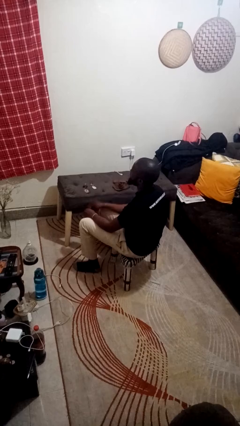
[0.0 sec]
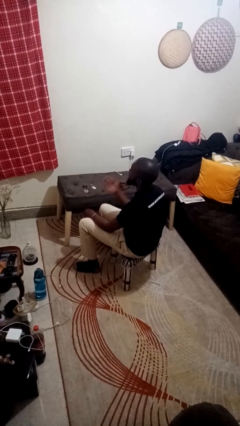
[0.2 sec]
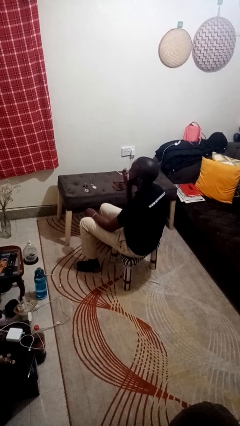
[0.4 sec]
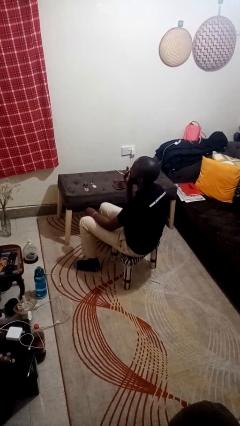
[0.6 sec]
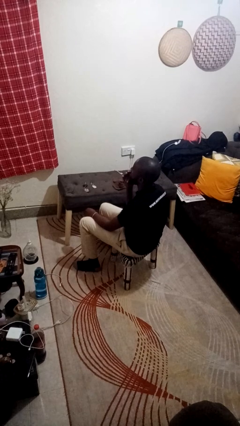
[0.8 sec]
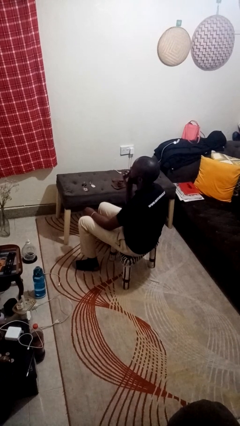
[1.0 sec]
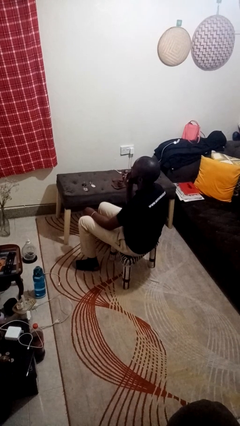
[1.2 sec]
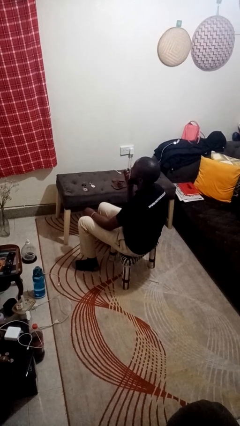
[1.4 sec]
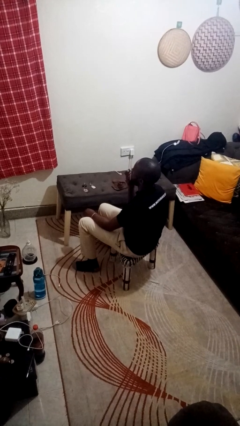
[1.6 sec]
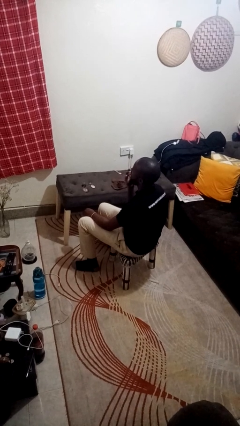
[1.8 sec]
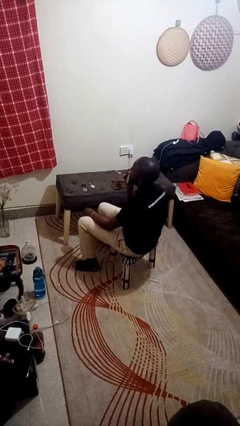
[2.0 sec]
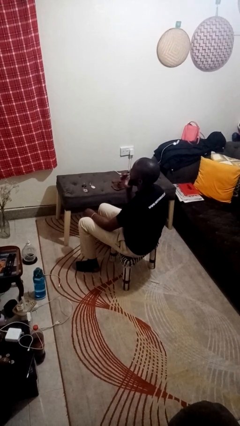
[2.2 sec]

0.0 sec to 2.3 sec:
person licks fingers

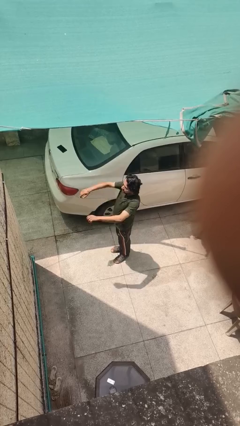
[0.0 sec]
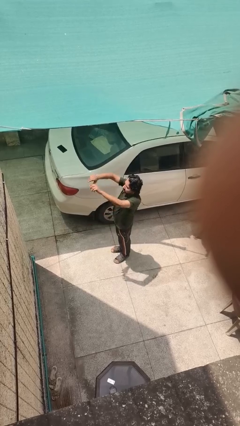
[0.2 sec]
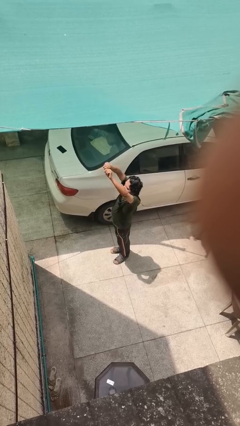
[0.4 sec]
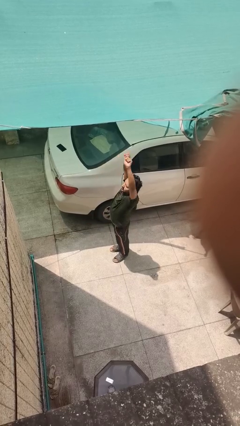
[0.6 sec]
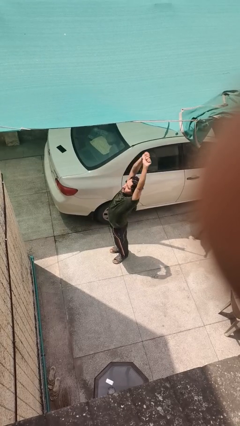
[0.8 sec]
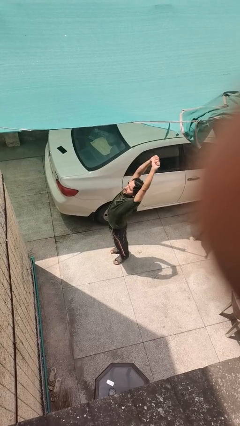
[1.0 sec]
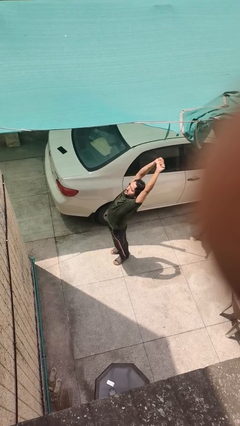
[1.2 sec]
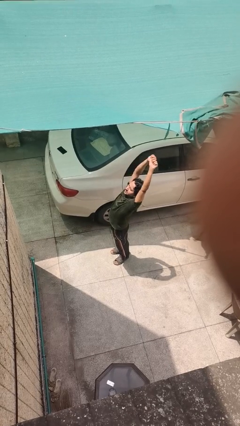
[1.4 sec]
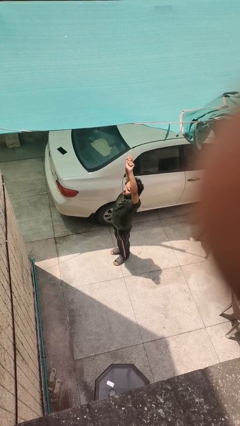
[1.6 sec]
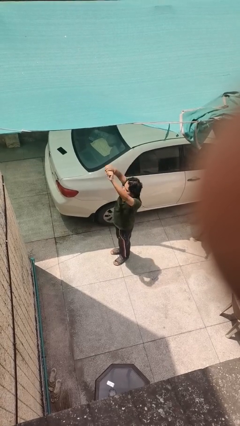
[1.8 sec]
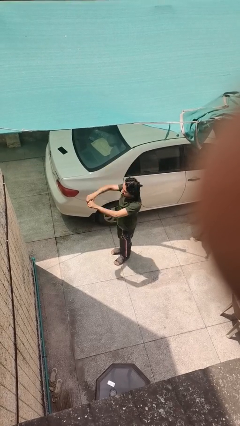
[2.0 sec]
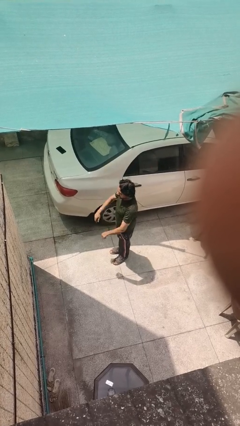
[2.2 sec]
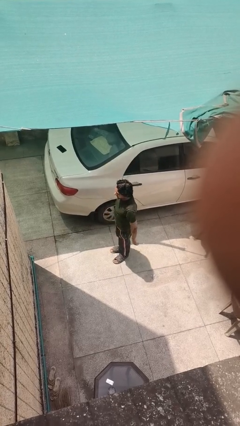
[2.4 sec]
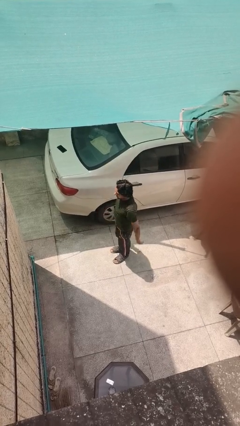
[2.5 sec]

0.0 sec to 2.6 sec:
person stretches arms over head

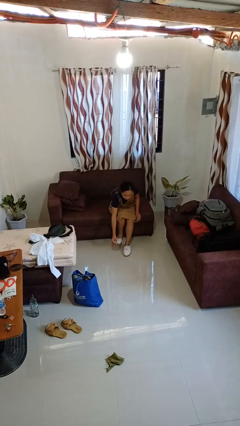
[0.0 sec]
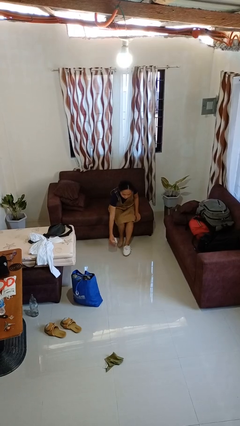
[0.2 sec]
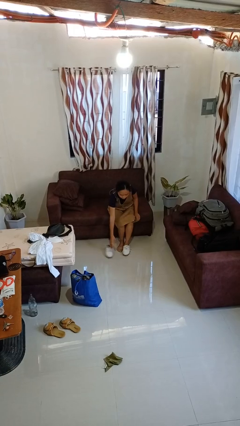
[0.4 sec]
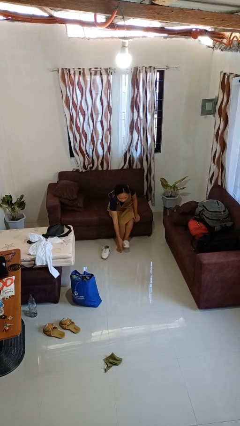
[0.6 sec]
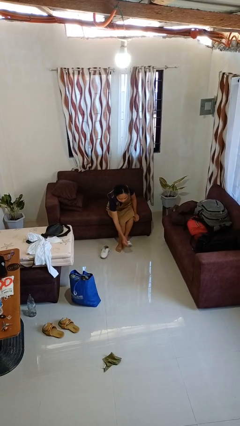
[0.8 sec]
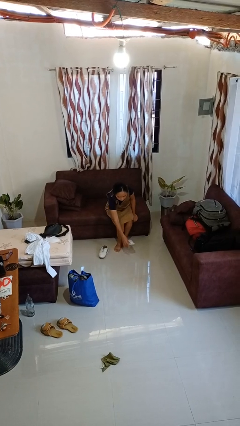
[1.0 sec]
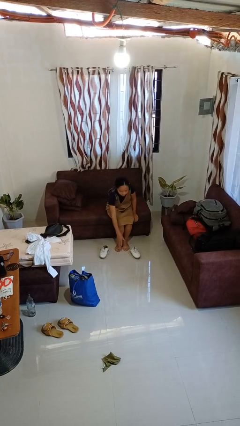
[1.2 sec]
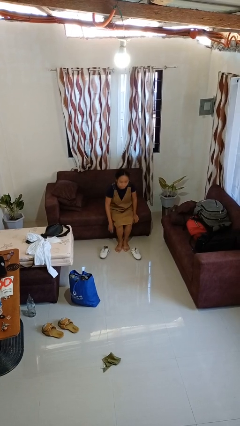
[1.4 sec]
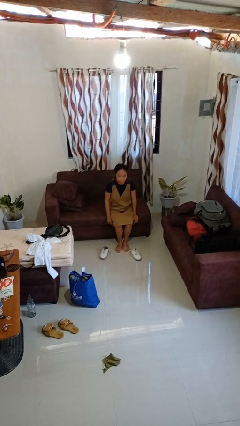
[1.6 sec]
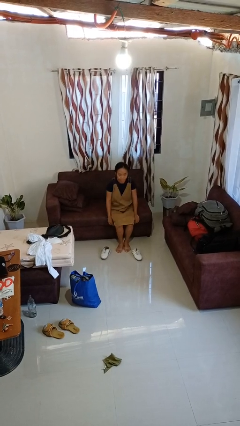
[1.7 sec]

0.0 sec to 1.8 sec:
person takes off shoes

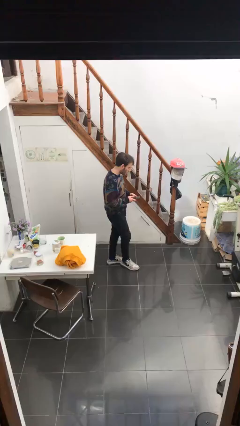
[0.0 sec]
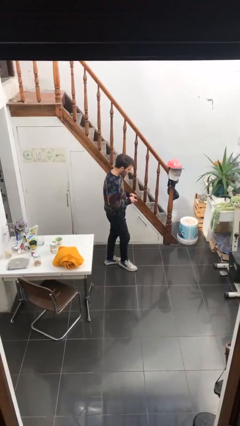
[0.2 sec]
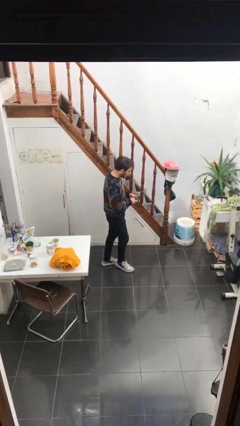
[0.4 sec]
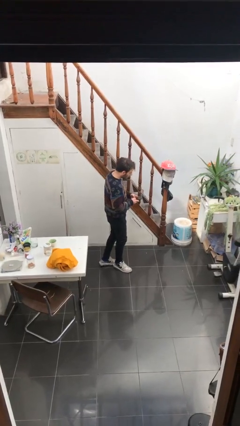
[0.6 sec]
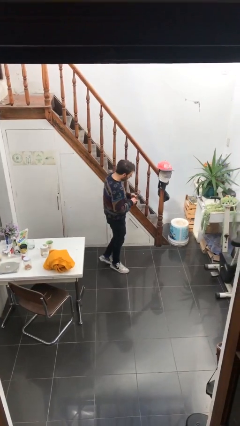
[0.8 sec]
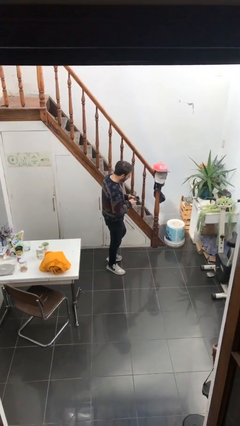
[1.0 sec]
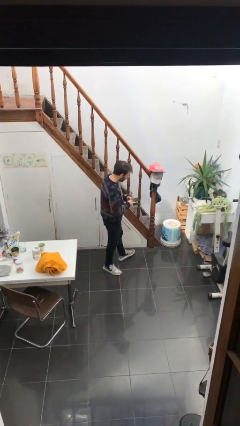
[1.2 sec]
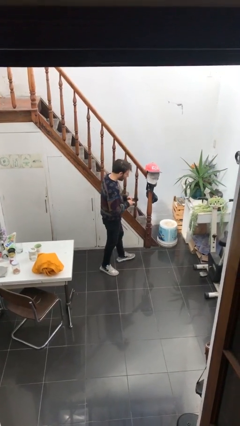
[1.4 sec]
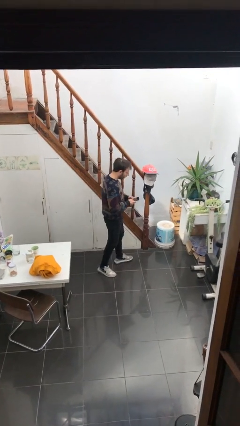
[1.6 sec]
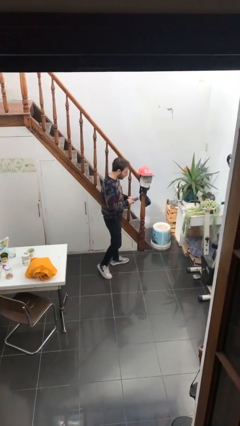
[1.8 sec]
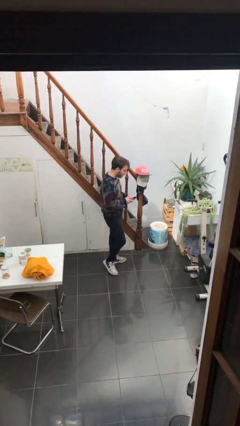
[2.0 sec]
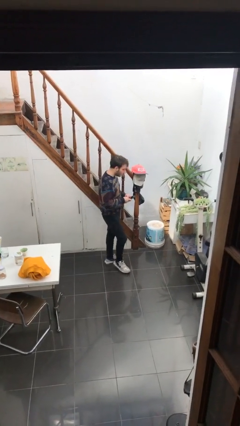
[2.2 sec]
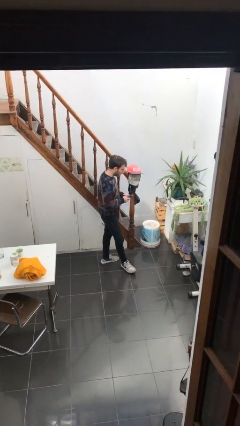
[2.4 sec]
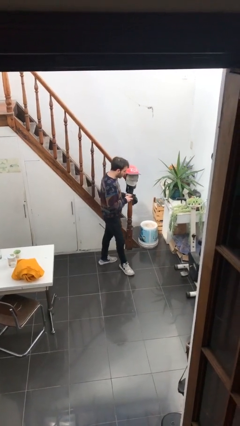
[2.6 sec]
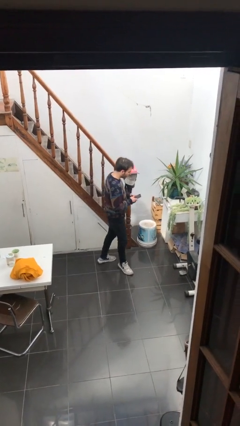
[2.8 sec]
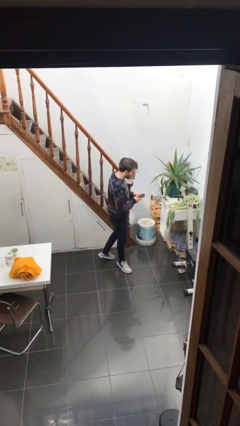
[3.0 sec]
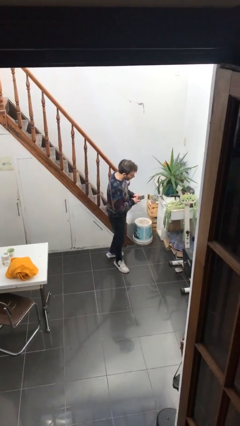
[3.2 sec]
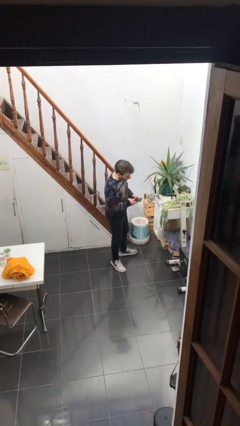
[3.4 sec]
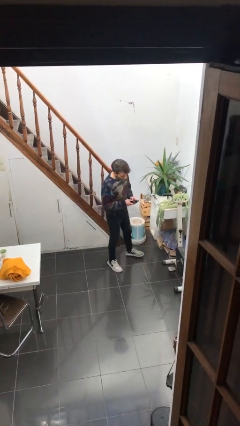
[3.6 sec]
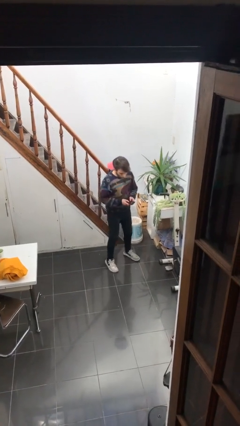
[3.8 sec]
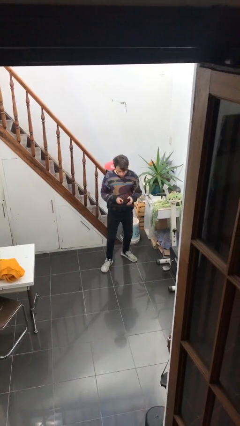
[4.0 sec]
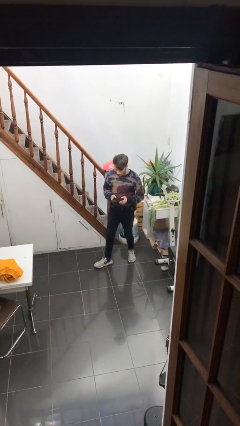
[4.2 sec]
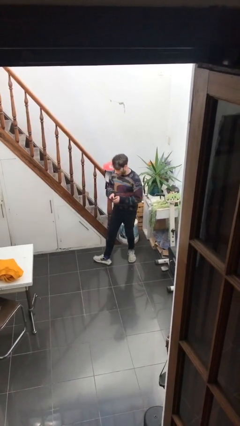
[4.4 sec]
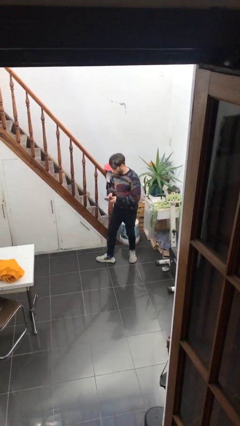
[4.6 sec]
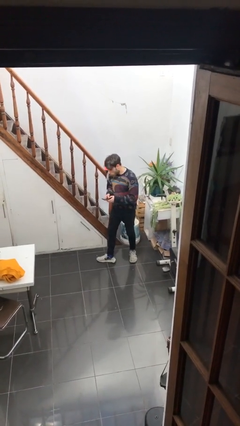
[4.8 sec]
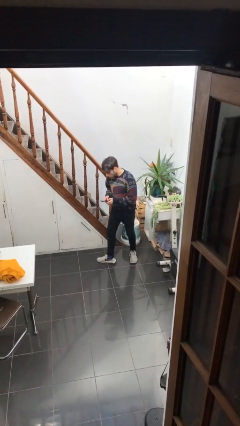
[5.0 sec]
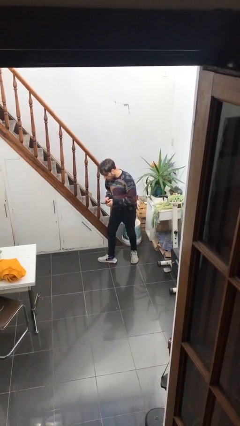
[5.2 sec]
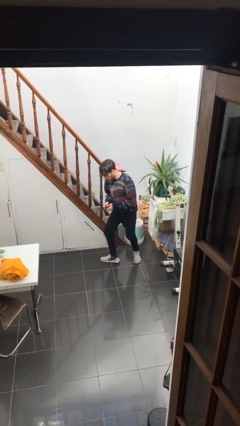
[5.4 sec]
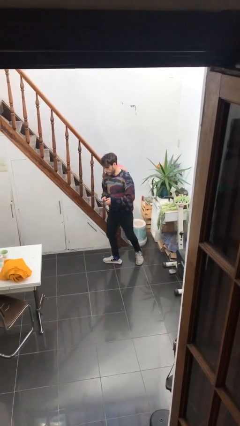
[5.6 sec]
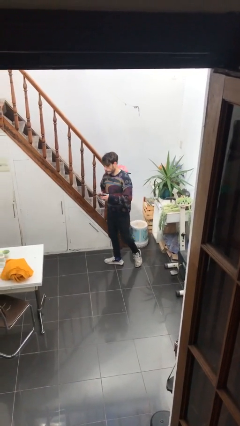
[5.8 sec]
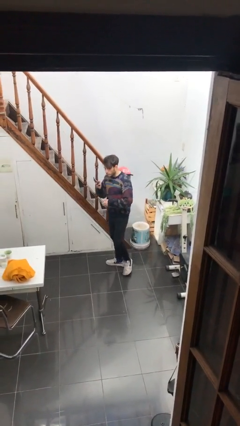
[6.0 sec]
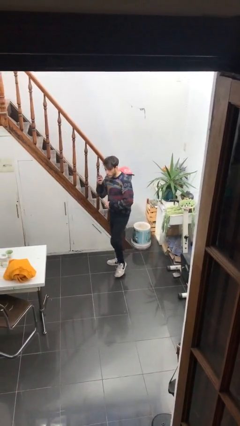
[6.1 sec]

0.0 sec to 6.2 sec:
person texts on phone

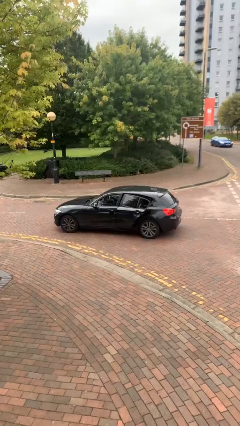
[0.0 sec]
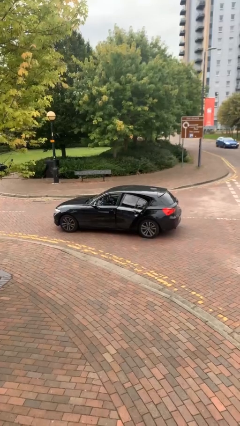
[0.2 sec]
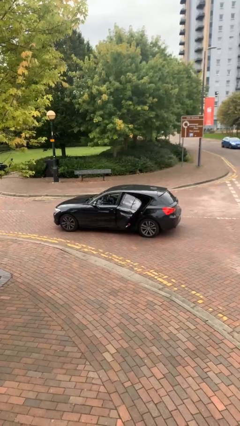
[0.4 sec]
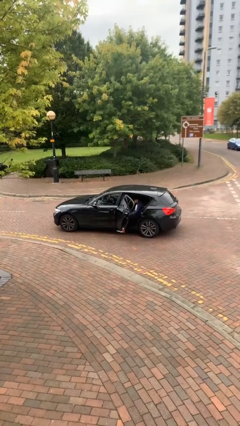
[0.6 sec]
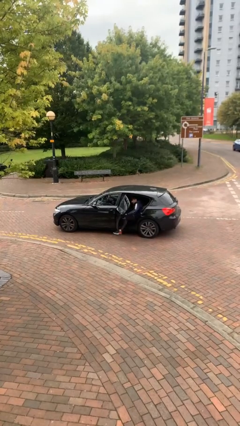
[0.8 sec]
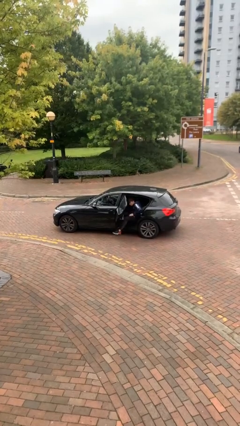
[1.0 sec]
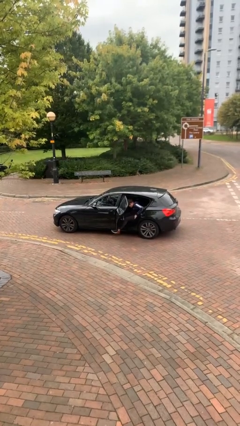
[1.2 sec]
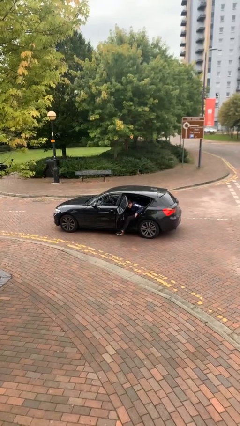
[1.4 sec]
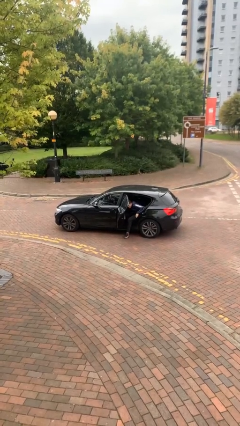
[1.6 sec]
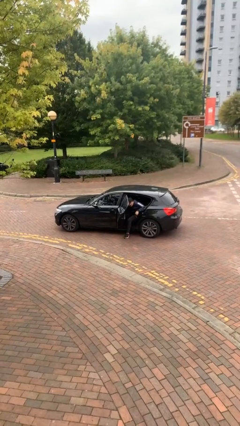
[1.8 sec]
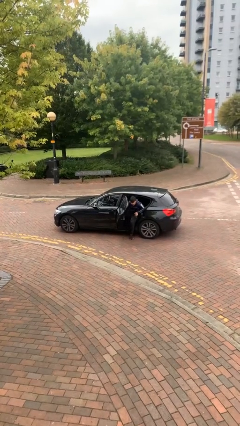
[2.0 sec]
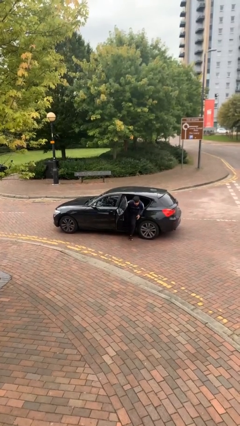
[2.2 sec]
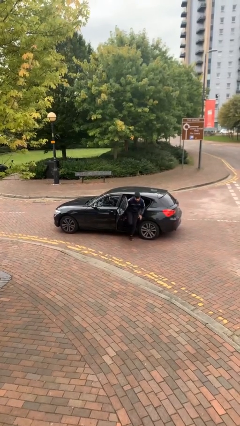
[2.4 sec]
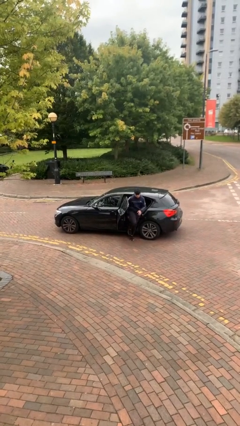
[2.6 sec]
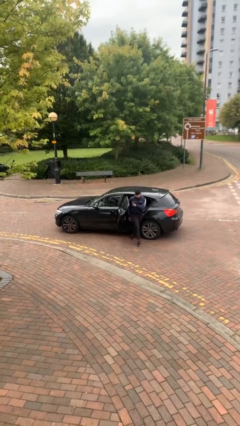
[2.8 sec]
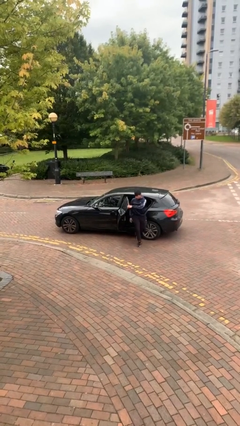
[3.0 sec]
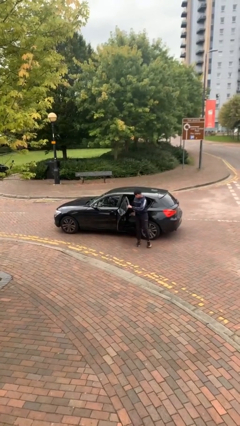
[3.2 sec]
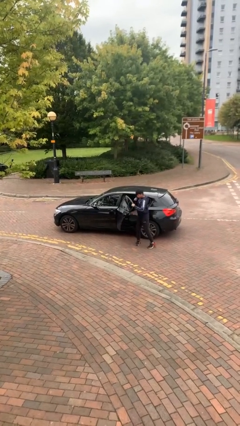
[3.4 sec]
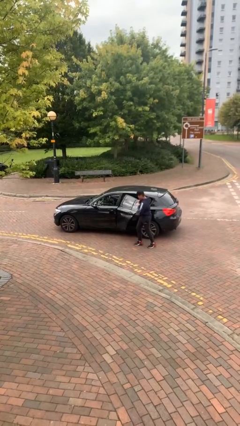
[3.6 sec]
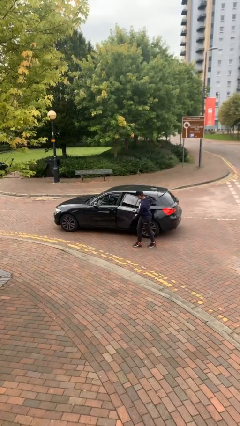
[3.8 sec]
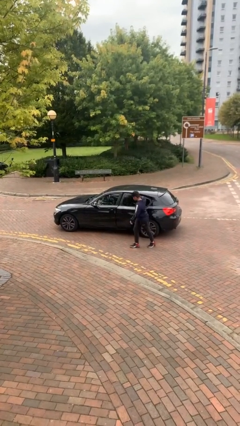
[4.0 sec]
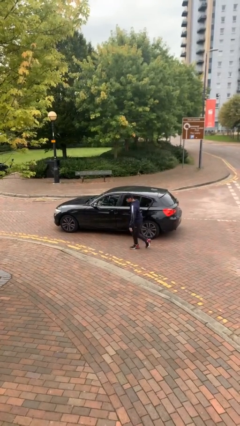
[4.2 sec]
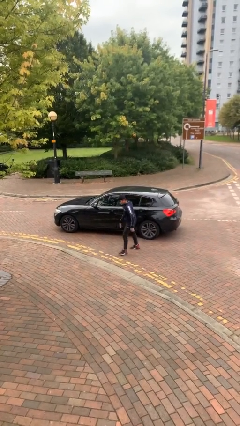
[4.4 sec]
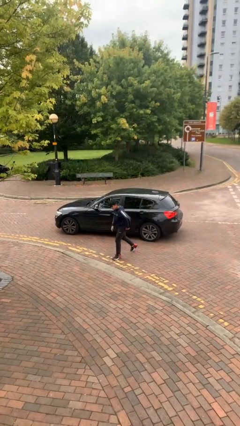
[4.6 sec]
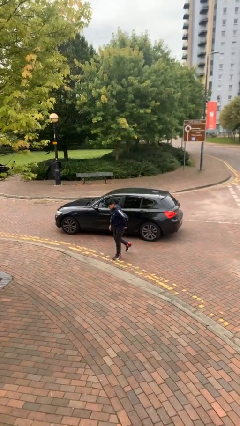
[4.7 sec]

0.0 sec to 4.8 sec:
car drops off person
